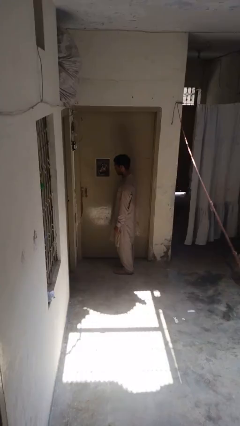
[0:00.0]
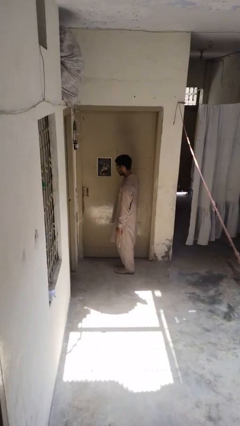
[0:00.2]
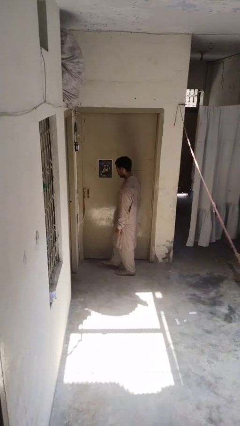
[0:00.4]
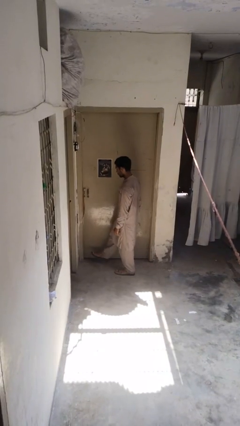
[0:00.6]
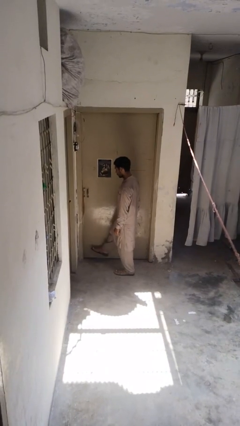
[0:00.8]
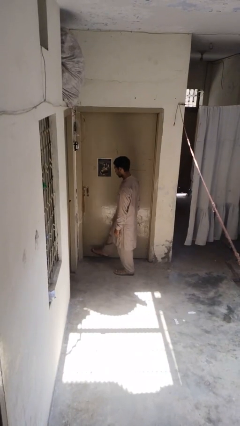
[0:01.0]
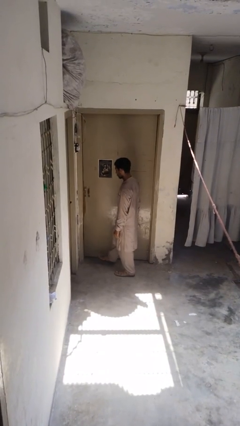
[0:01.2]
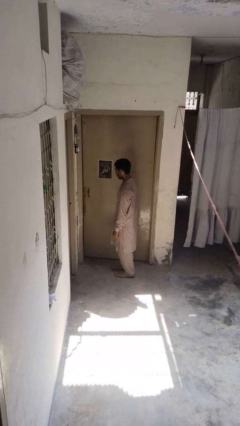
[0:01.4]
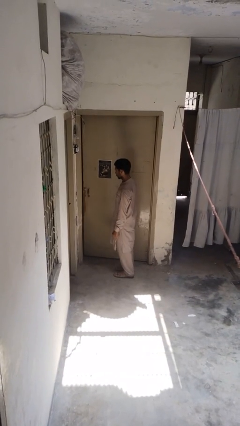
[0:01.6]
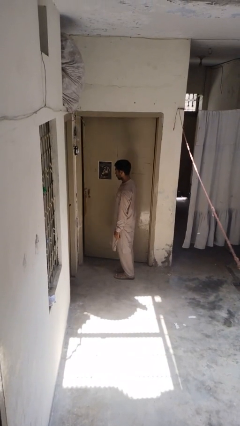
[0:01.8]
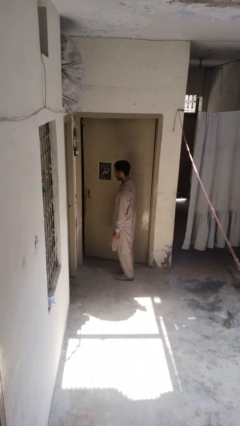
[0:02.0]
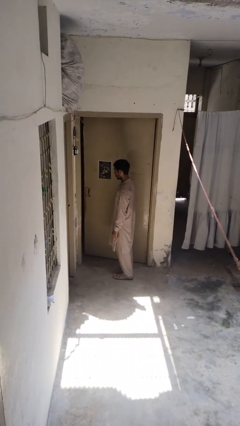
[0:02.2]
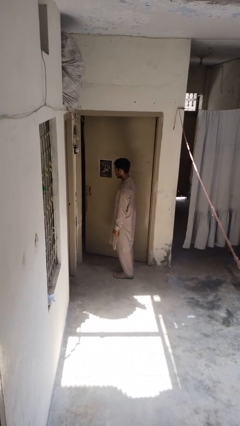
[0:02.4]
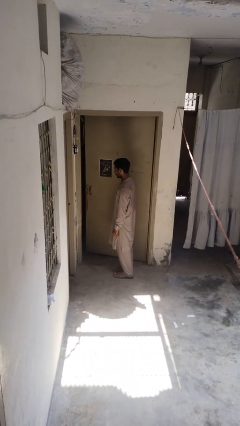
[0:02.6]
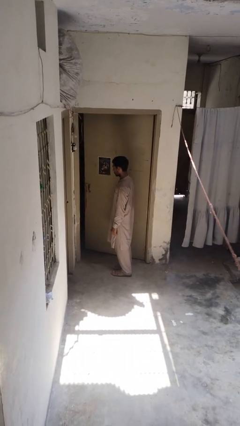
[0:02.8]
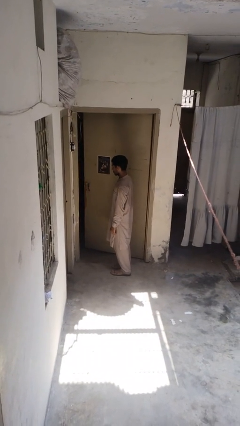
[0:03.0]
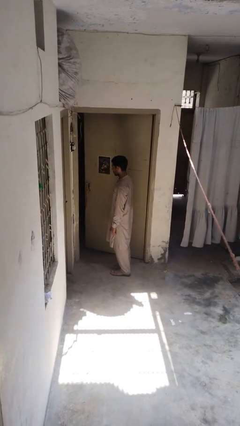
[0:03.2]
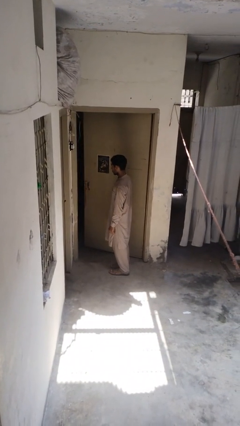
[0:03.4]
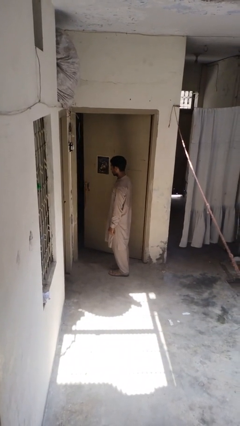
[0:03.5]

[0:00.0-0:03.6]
person opens facility door

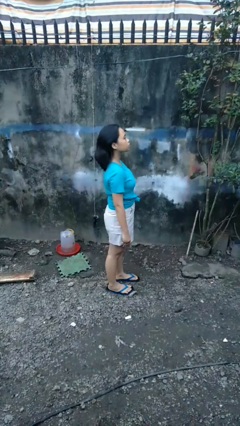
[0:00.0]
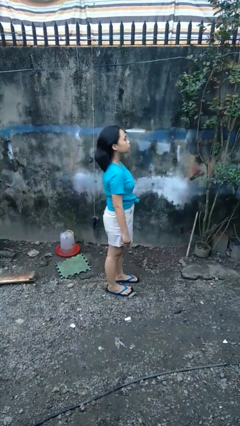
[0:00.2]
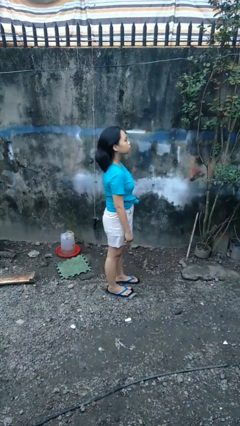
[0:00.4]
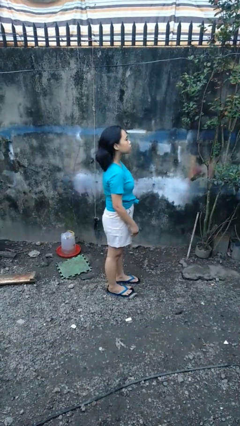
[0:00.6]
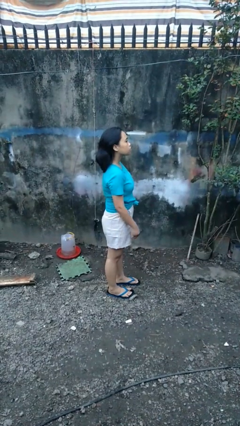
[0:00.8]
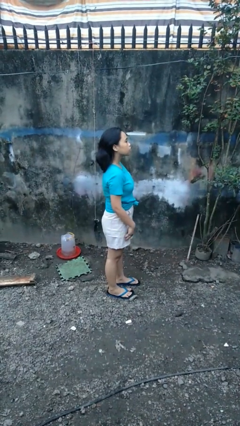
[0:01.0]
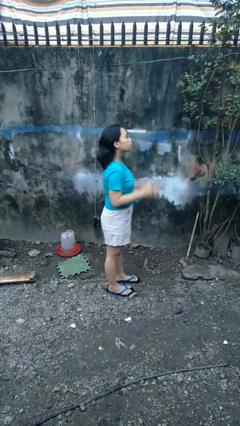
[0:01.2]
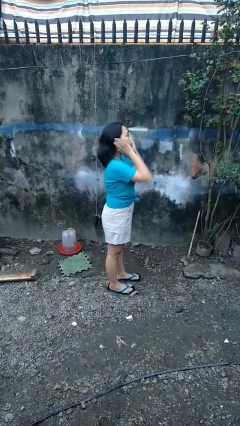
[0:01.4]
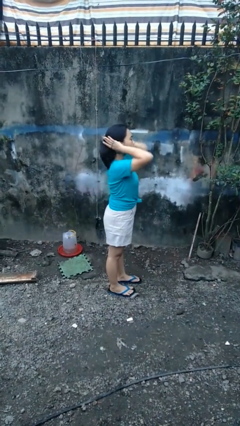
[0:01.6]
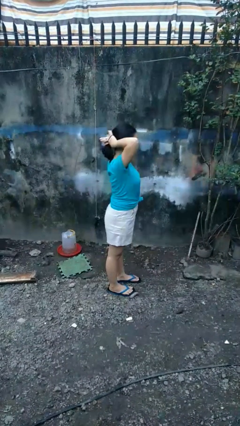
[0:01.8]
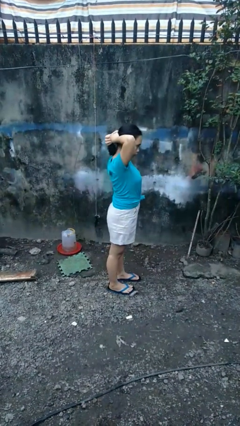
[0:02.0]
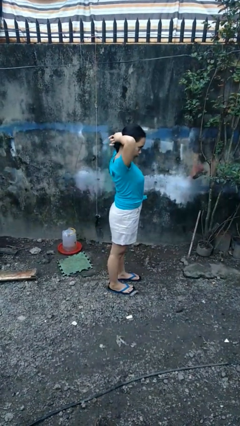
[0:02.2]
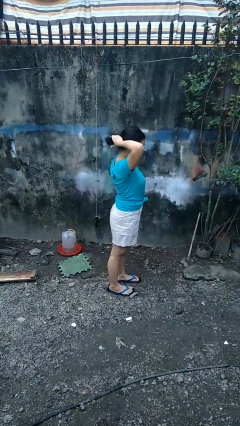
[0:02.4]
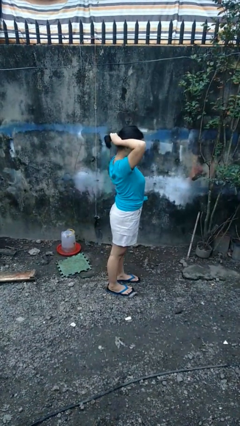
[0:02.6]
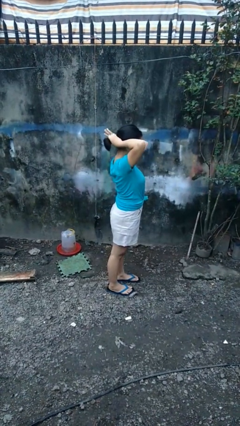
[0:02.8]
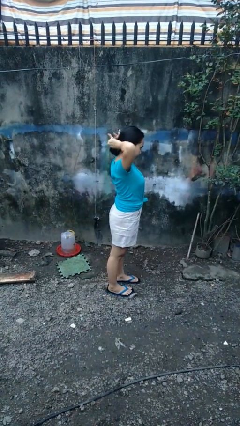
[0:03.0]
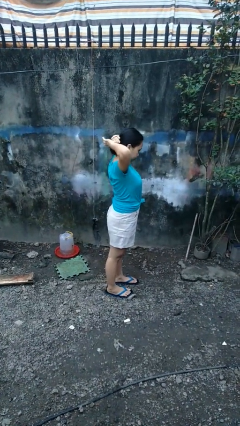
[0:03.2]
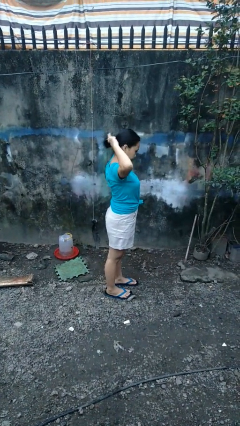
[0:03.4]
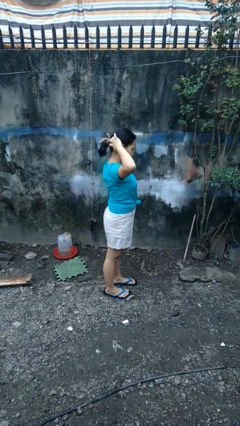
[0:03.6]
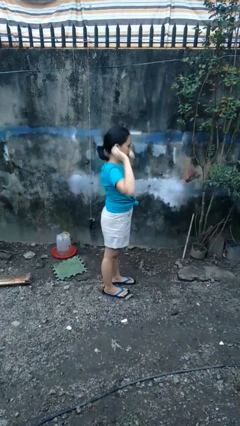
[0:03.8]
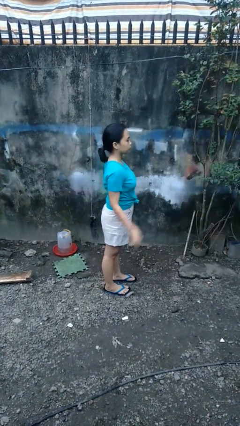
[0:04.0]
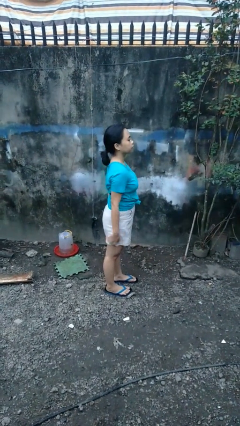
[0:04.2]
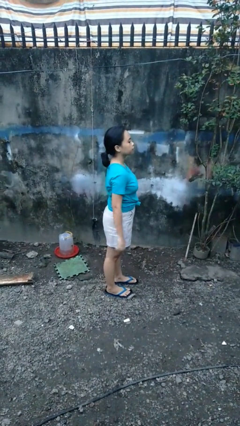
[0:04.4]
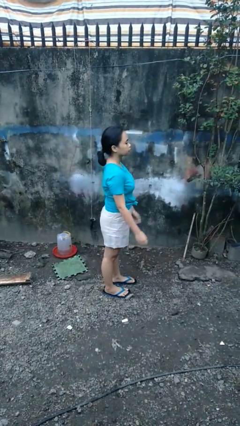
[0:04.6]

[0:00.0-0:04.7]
person puts hair in ponytail

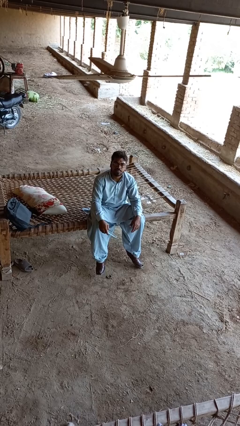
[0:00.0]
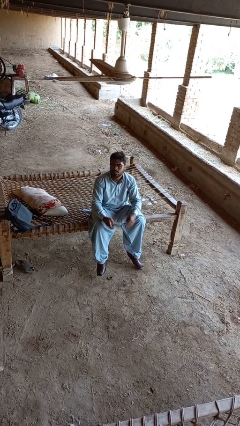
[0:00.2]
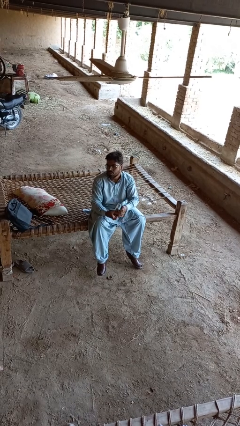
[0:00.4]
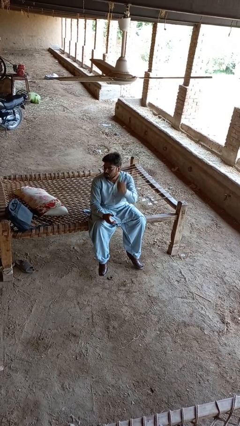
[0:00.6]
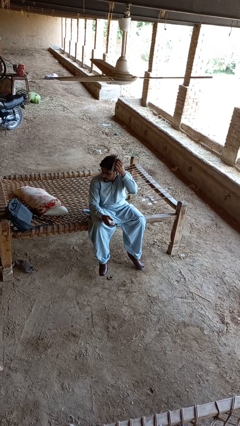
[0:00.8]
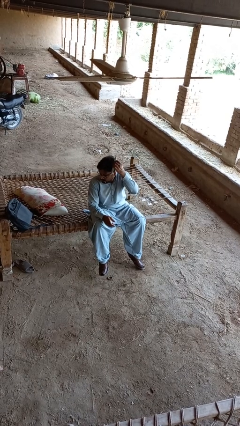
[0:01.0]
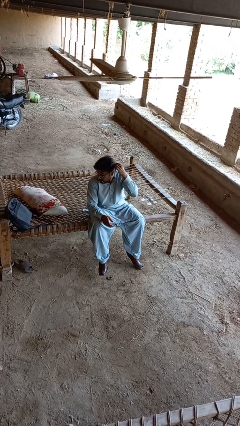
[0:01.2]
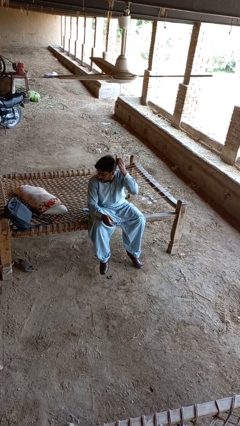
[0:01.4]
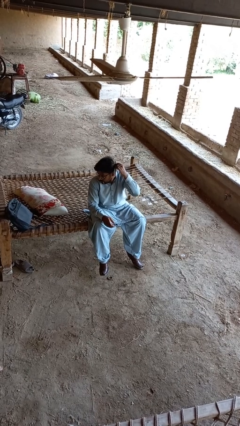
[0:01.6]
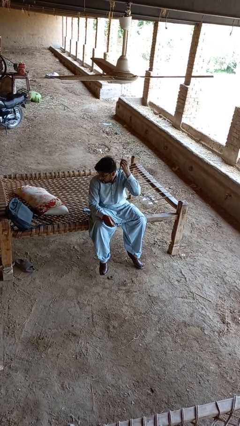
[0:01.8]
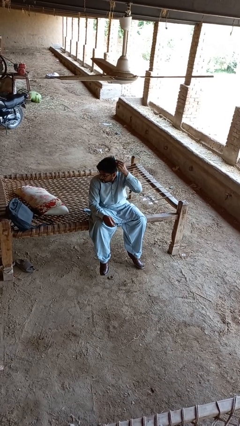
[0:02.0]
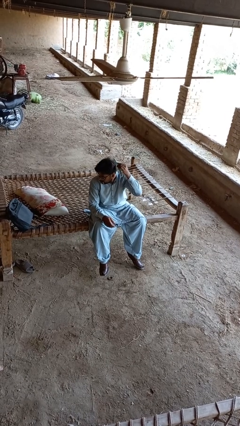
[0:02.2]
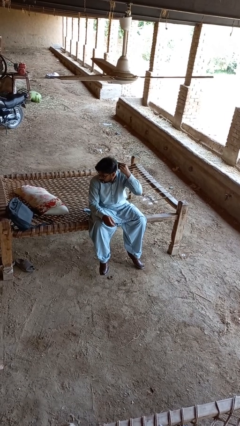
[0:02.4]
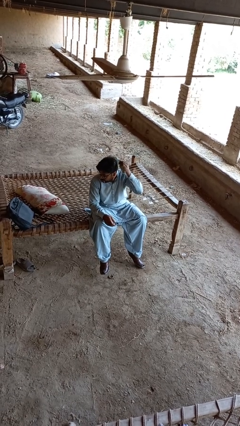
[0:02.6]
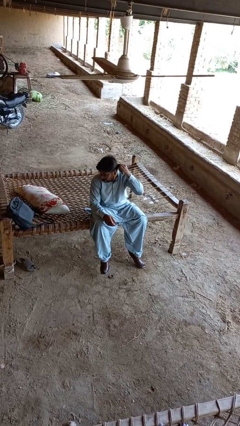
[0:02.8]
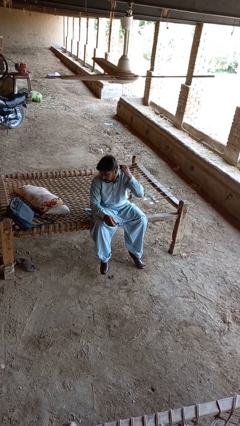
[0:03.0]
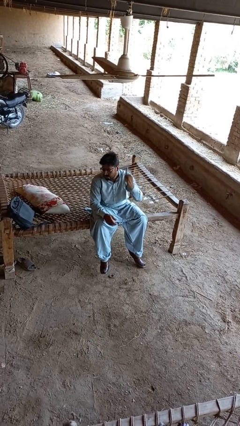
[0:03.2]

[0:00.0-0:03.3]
person brushes hair

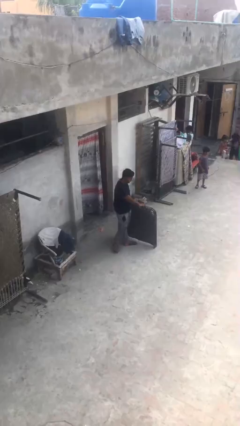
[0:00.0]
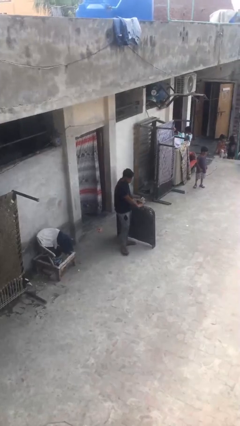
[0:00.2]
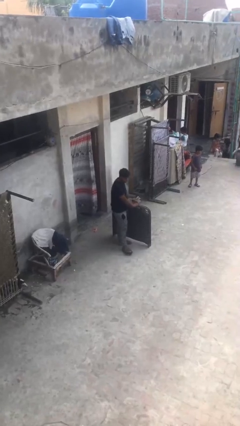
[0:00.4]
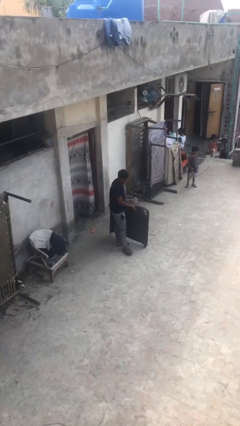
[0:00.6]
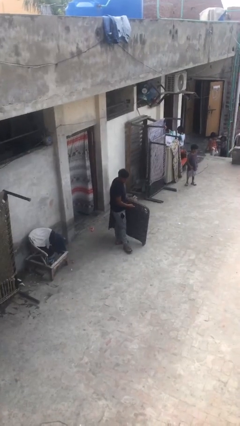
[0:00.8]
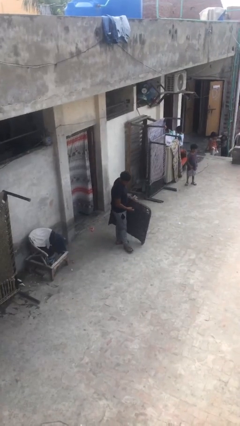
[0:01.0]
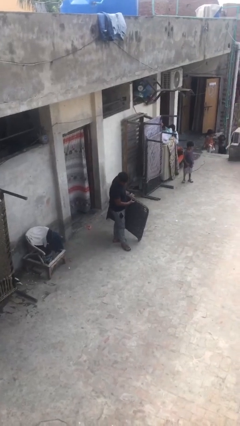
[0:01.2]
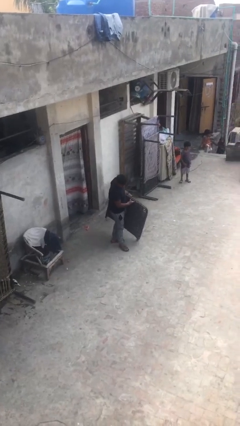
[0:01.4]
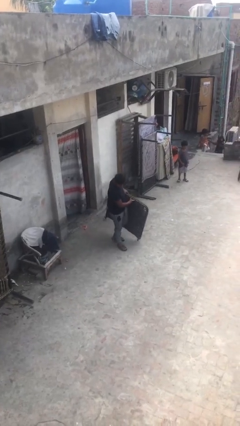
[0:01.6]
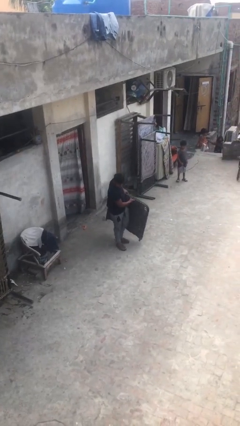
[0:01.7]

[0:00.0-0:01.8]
person picks up object from floor

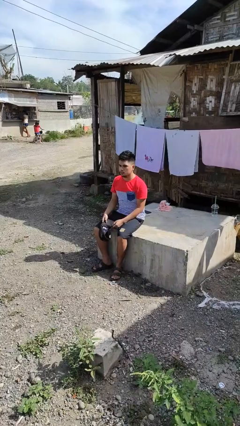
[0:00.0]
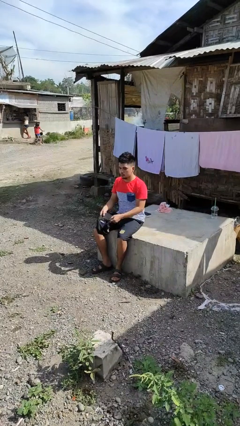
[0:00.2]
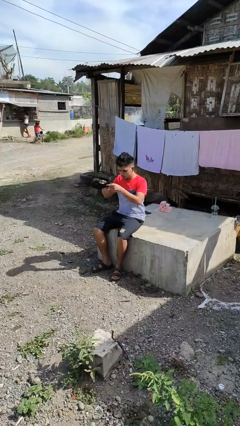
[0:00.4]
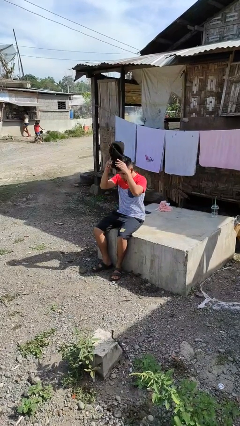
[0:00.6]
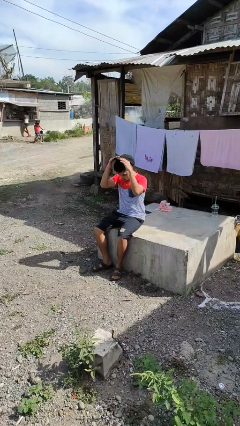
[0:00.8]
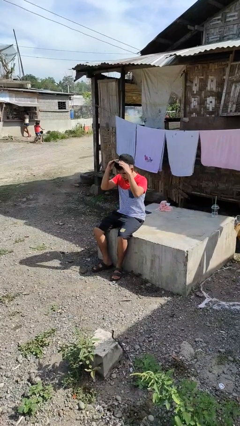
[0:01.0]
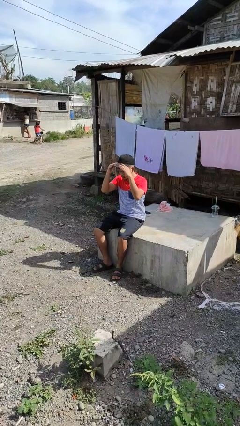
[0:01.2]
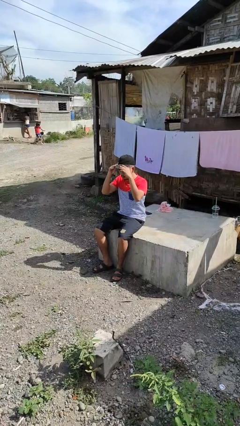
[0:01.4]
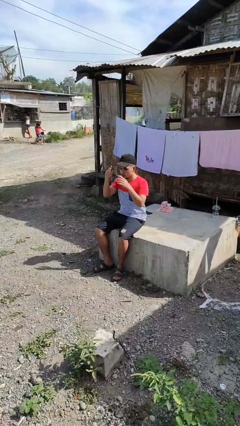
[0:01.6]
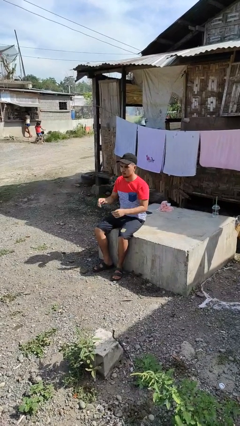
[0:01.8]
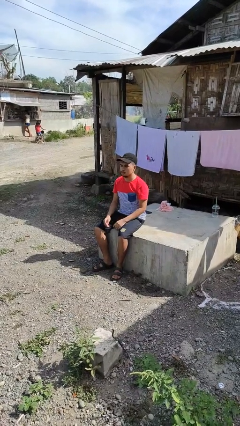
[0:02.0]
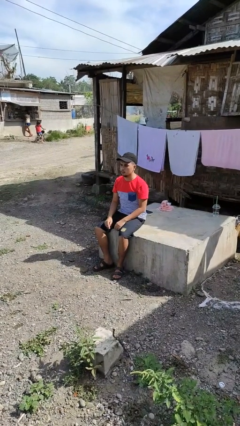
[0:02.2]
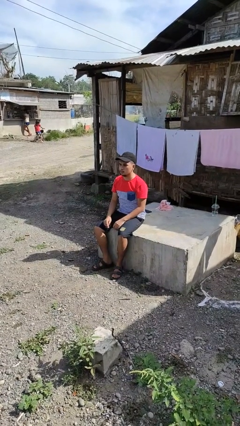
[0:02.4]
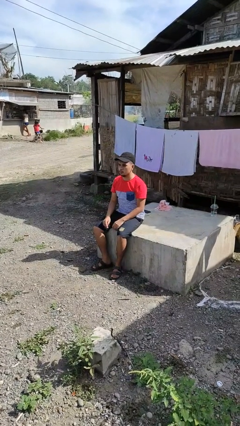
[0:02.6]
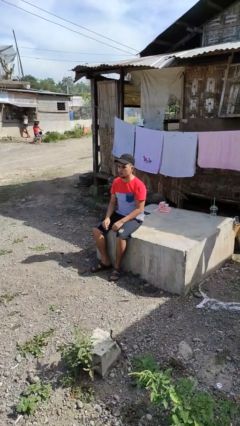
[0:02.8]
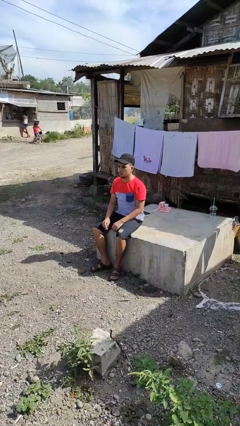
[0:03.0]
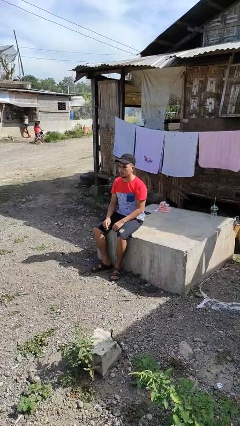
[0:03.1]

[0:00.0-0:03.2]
person puts on hat

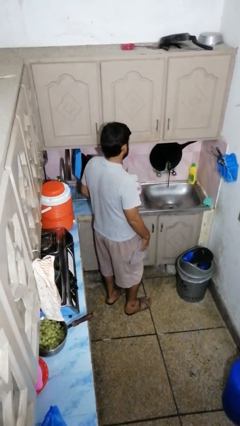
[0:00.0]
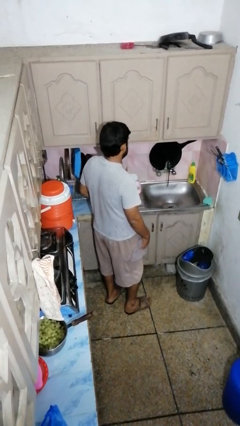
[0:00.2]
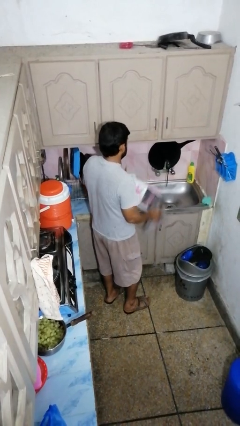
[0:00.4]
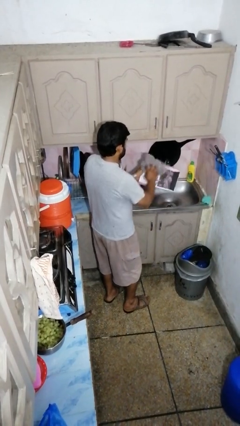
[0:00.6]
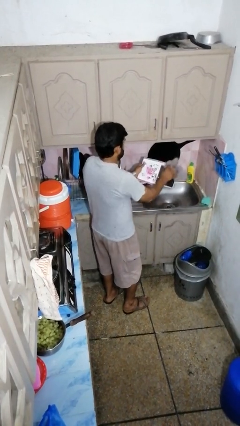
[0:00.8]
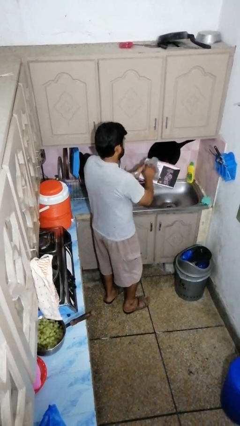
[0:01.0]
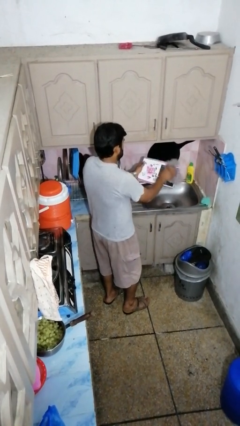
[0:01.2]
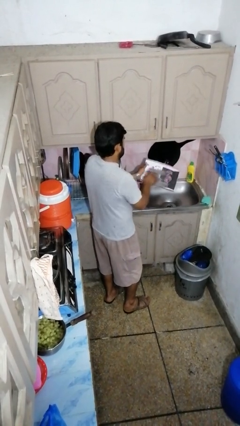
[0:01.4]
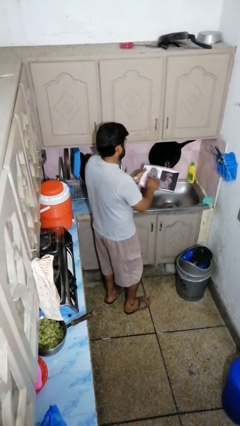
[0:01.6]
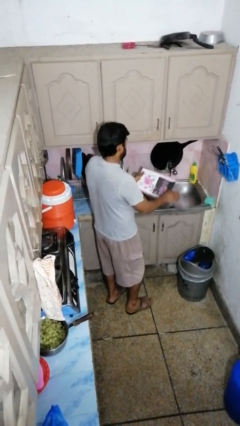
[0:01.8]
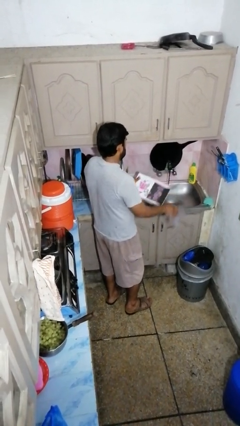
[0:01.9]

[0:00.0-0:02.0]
person dries dish
